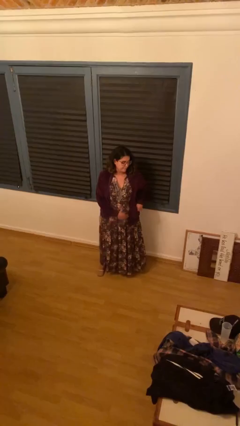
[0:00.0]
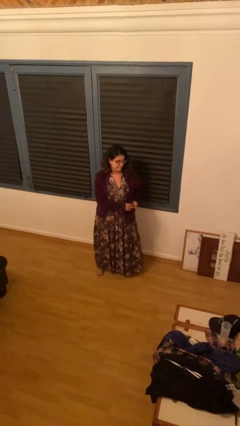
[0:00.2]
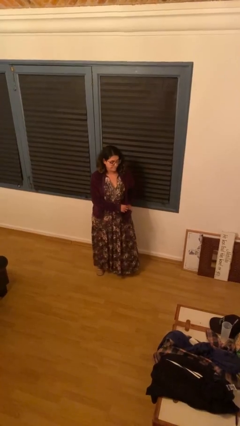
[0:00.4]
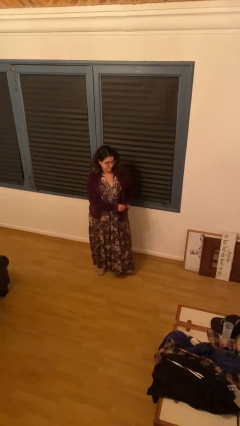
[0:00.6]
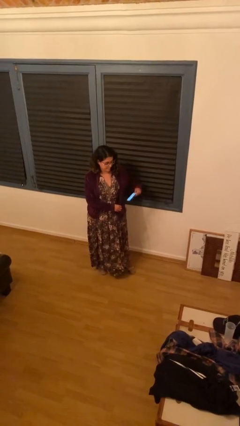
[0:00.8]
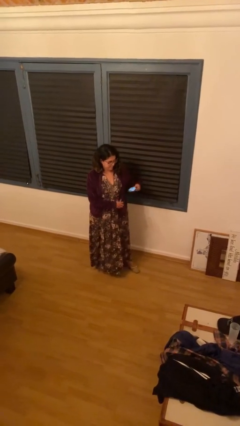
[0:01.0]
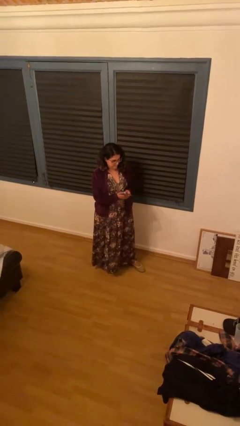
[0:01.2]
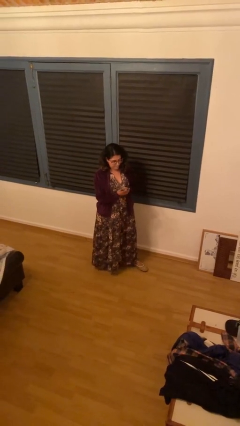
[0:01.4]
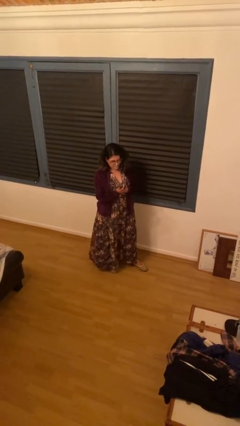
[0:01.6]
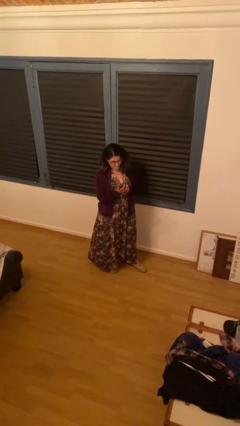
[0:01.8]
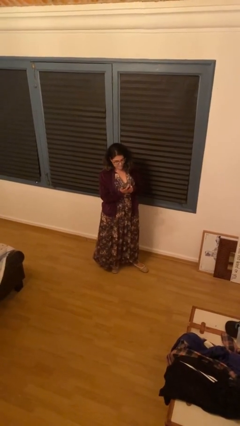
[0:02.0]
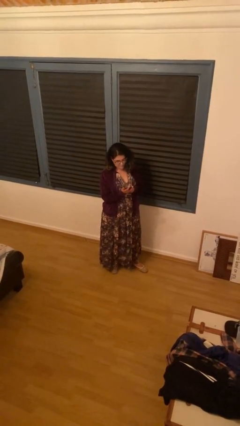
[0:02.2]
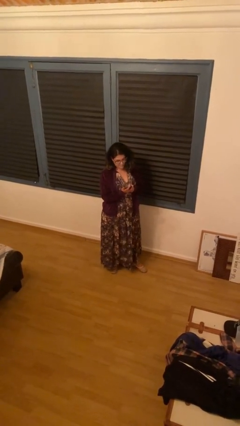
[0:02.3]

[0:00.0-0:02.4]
person takes phone from pocket

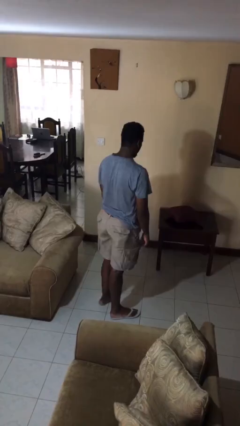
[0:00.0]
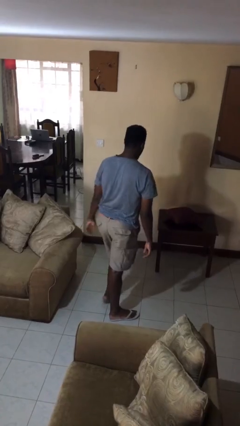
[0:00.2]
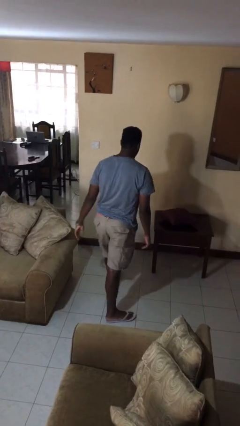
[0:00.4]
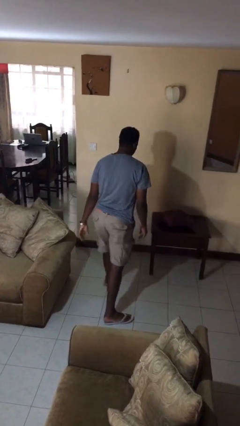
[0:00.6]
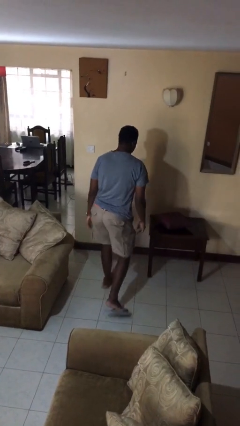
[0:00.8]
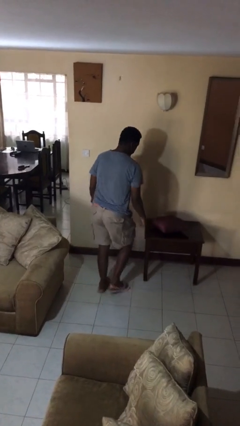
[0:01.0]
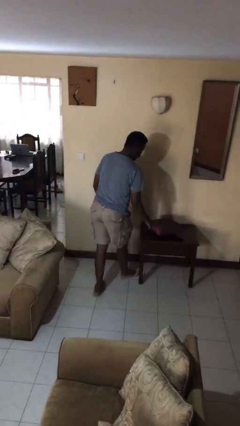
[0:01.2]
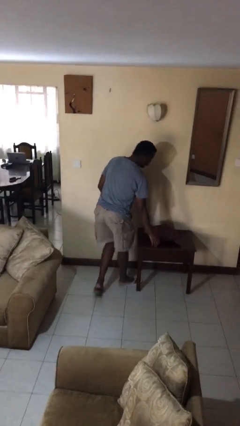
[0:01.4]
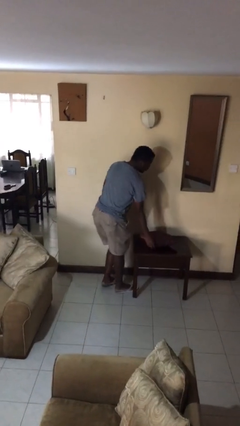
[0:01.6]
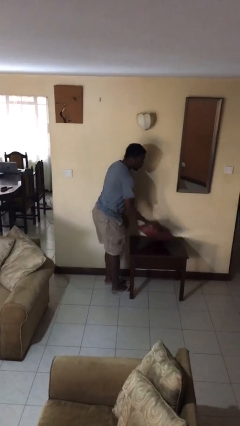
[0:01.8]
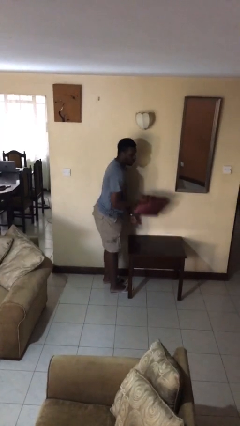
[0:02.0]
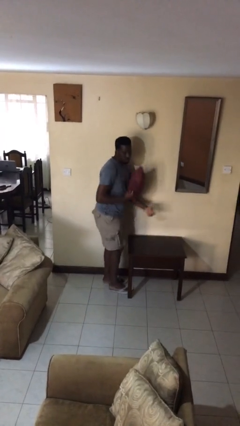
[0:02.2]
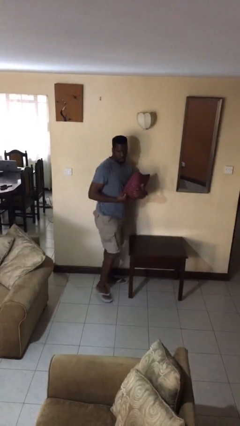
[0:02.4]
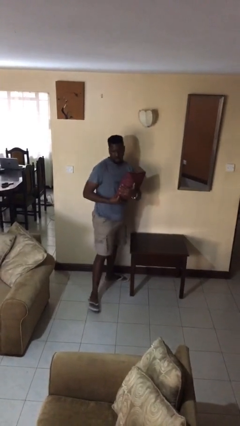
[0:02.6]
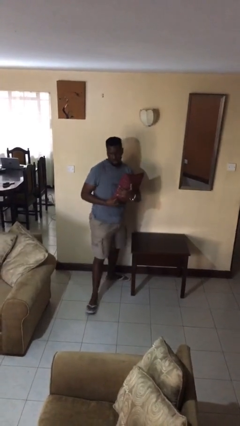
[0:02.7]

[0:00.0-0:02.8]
person picks up object from table

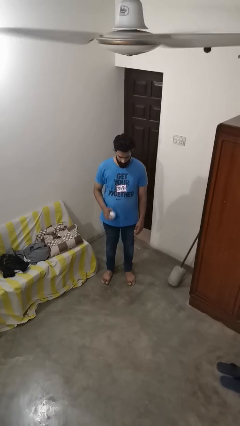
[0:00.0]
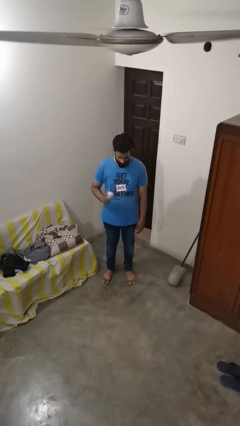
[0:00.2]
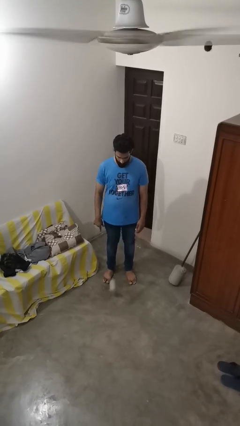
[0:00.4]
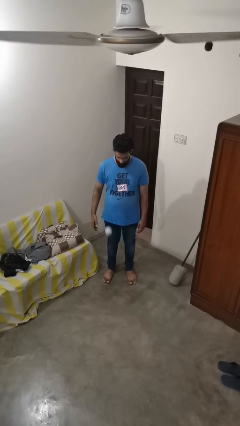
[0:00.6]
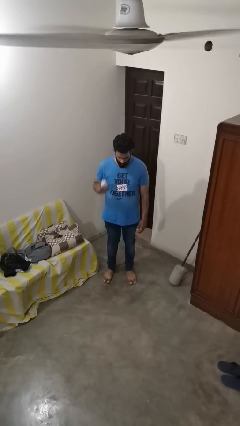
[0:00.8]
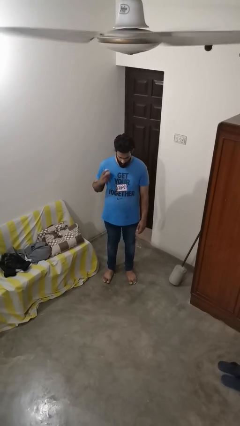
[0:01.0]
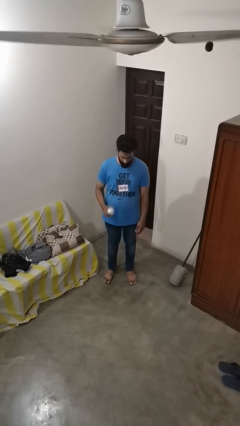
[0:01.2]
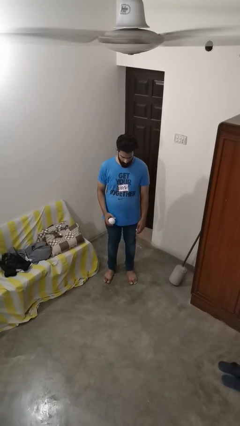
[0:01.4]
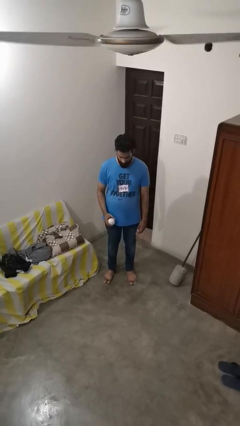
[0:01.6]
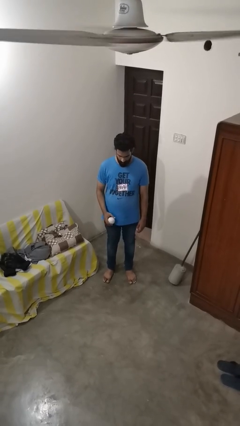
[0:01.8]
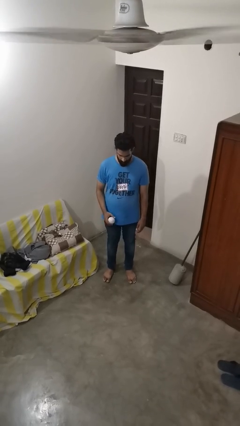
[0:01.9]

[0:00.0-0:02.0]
person bounces ball on floor

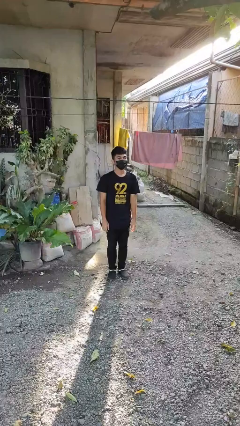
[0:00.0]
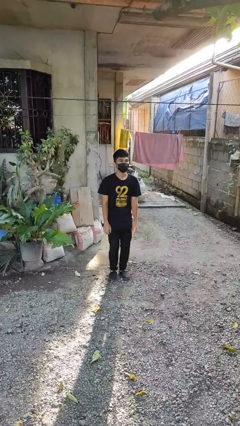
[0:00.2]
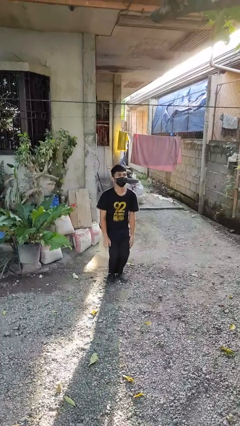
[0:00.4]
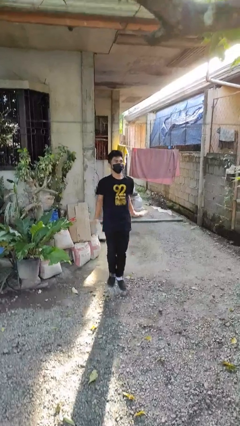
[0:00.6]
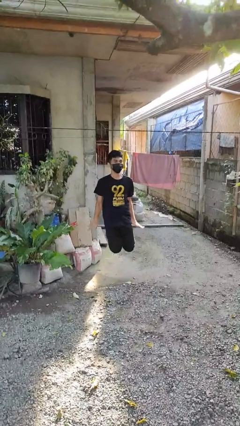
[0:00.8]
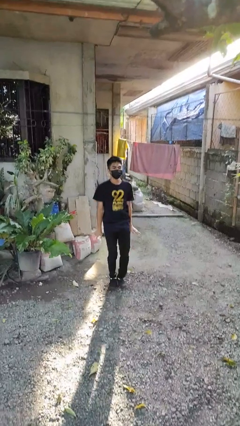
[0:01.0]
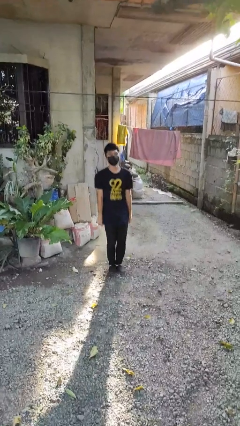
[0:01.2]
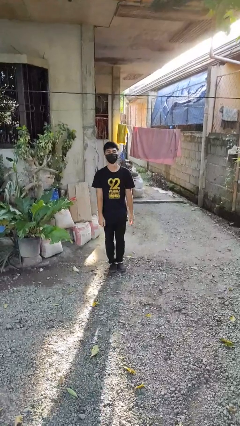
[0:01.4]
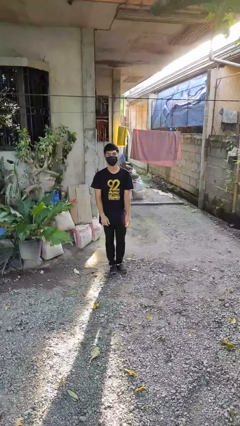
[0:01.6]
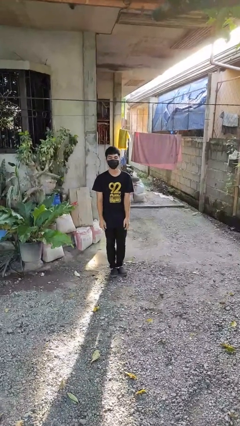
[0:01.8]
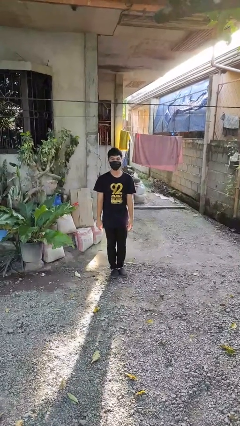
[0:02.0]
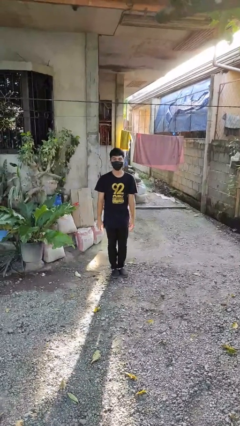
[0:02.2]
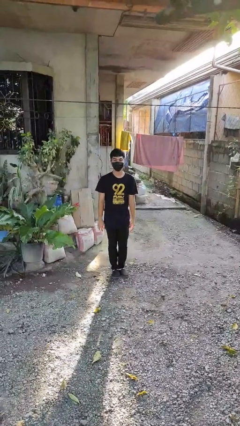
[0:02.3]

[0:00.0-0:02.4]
person jumps

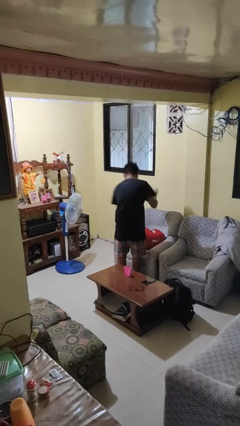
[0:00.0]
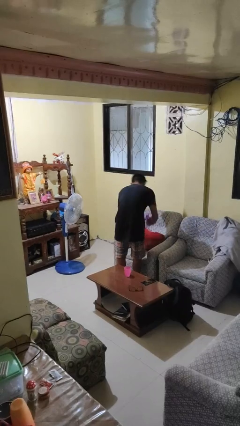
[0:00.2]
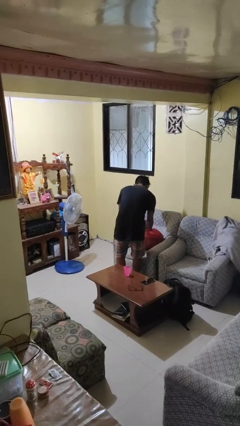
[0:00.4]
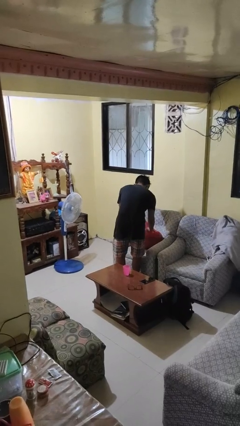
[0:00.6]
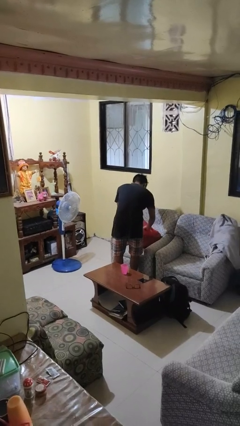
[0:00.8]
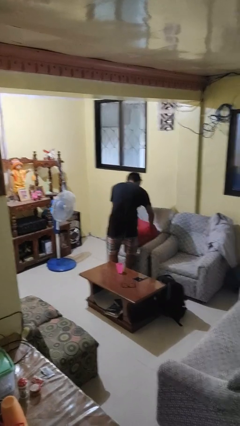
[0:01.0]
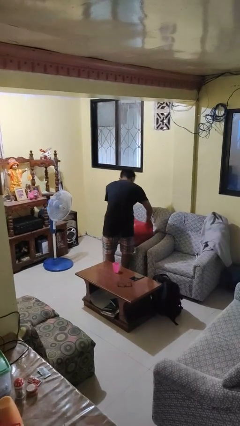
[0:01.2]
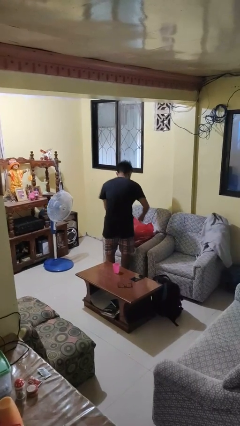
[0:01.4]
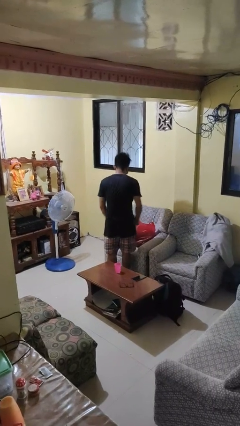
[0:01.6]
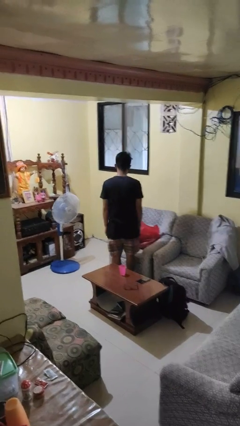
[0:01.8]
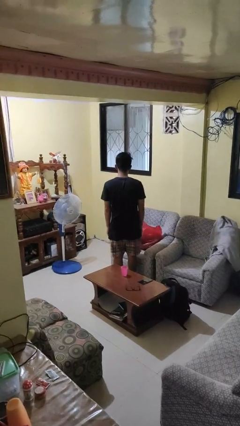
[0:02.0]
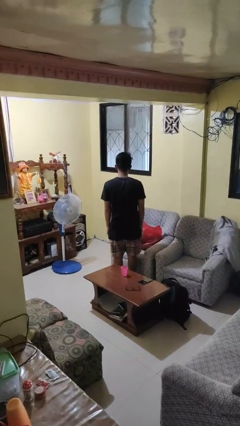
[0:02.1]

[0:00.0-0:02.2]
person puts object into bag

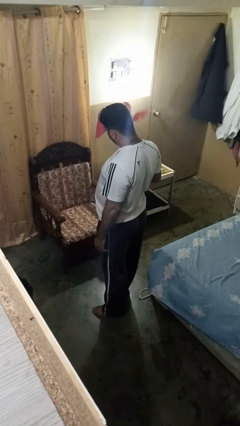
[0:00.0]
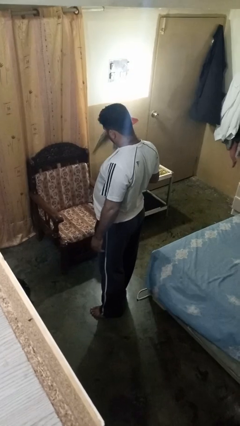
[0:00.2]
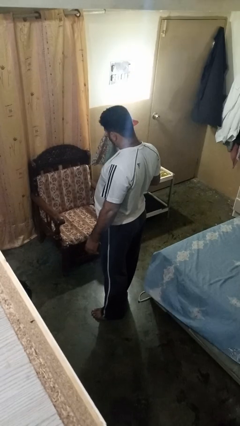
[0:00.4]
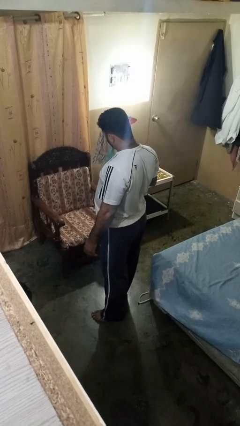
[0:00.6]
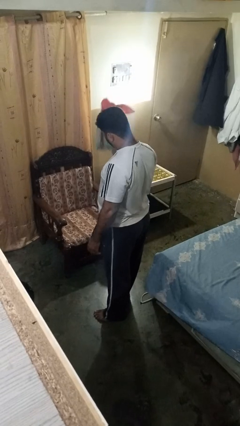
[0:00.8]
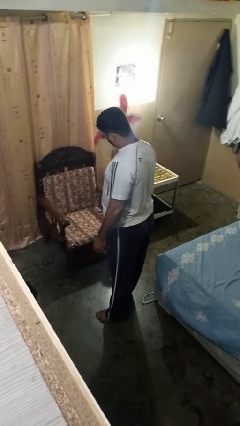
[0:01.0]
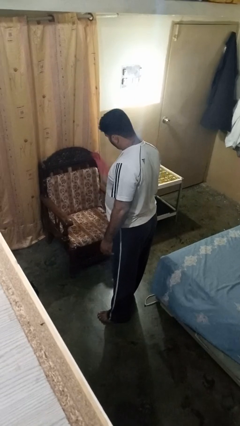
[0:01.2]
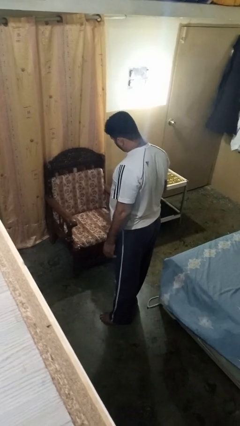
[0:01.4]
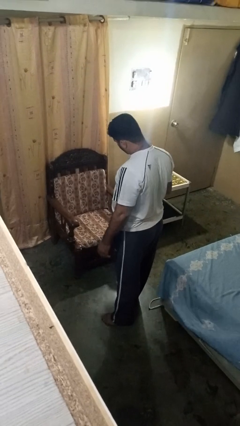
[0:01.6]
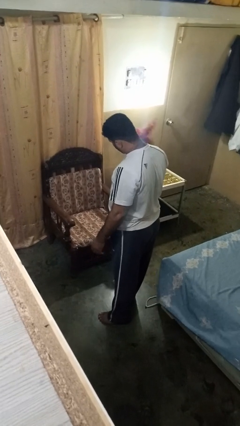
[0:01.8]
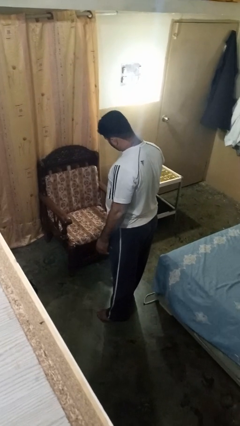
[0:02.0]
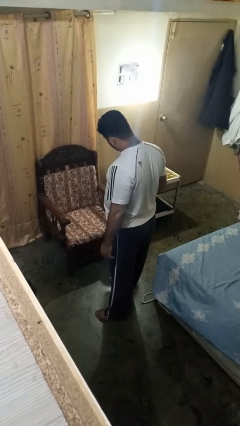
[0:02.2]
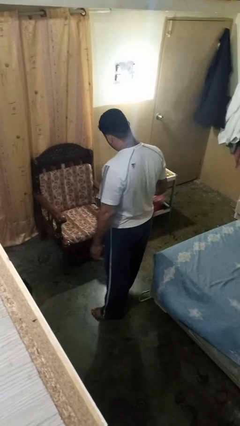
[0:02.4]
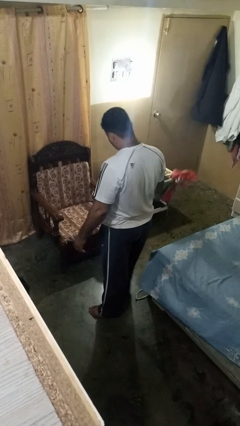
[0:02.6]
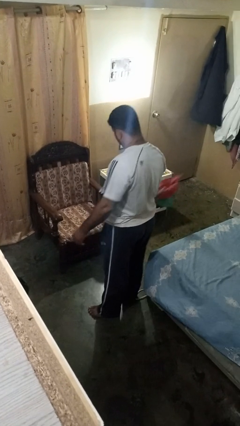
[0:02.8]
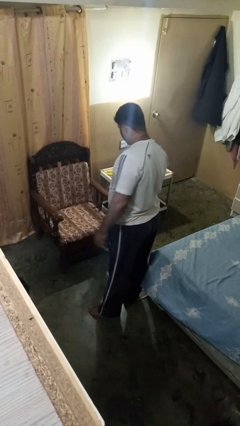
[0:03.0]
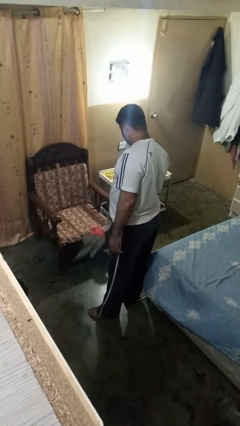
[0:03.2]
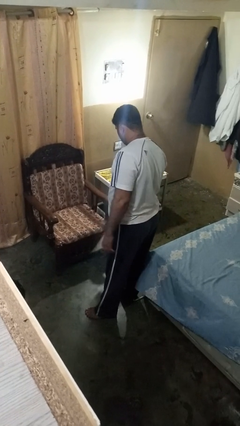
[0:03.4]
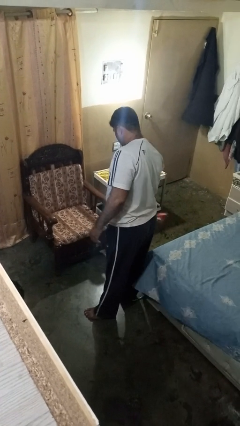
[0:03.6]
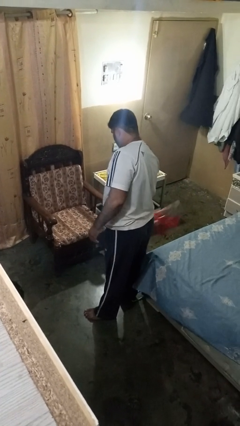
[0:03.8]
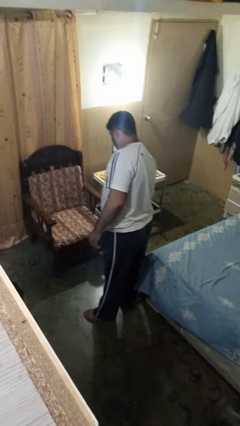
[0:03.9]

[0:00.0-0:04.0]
person dusts furniture

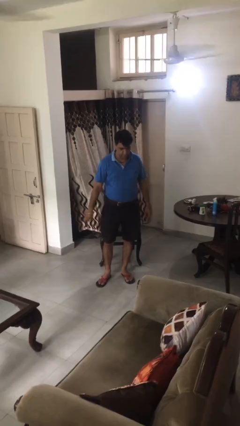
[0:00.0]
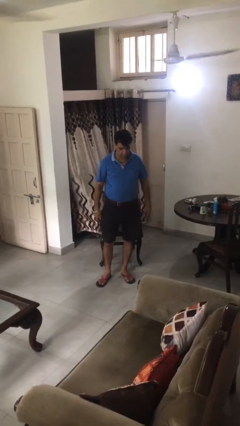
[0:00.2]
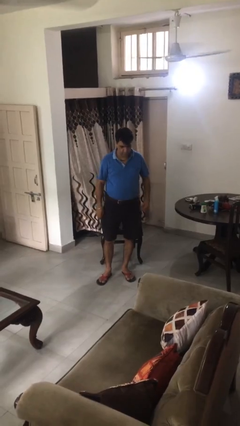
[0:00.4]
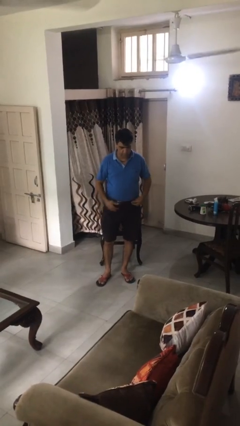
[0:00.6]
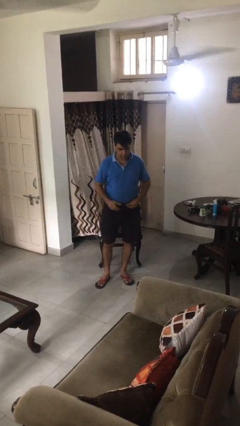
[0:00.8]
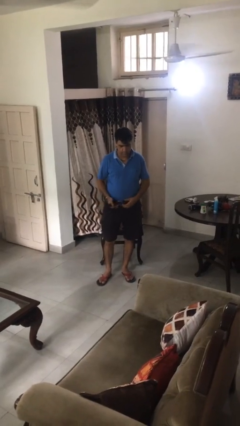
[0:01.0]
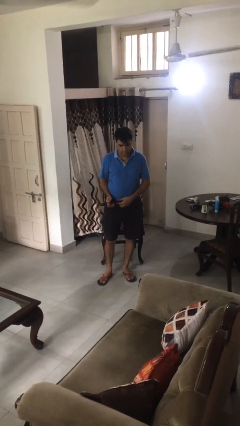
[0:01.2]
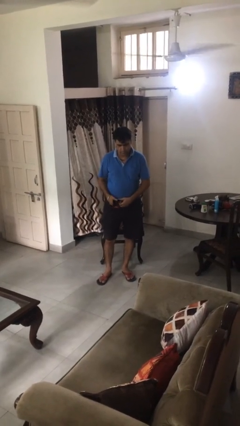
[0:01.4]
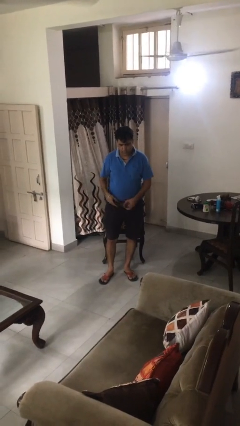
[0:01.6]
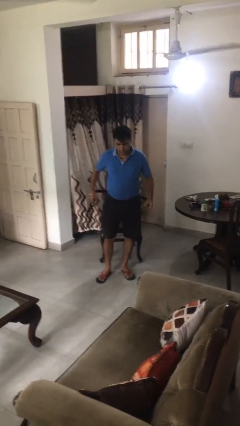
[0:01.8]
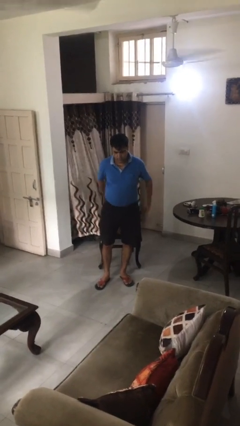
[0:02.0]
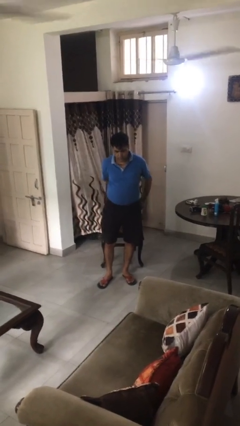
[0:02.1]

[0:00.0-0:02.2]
person takes off belt
